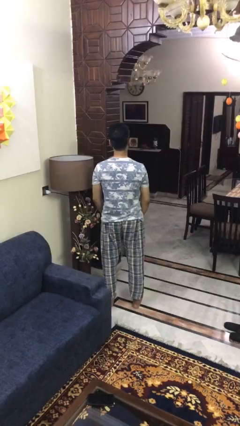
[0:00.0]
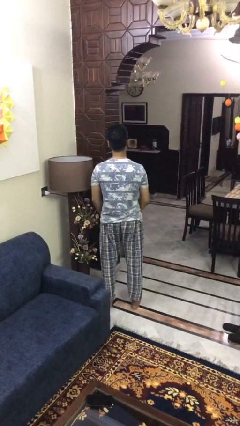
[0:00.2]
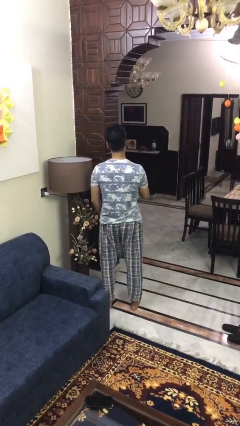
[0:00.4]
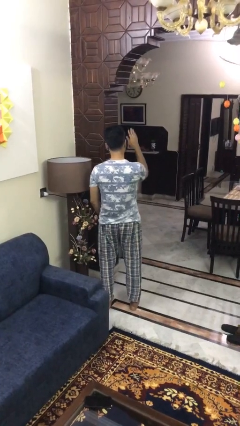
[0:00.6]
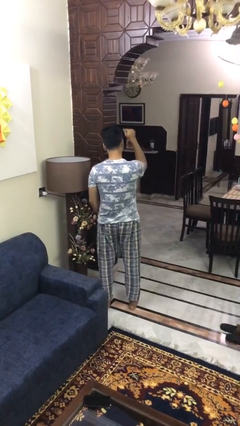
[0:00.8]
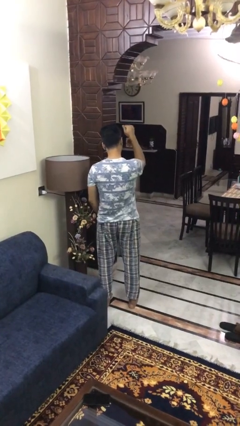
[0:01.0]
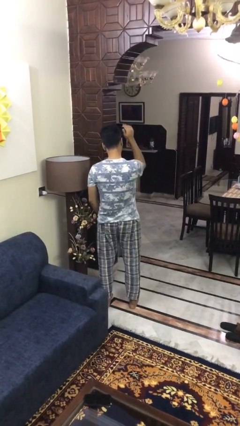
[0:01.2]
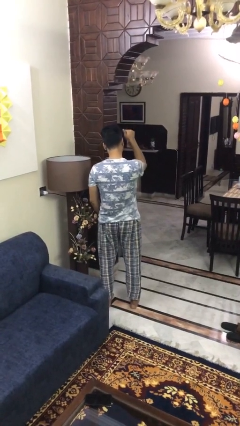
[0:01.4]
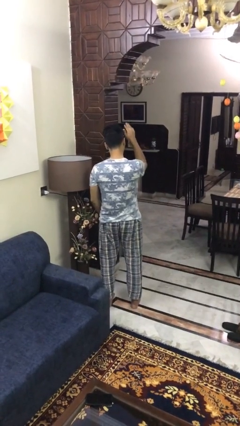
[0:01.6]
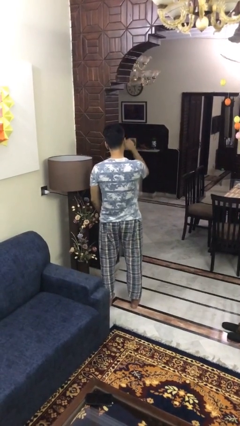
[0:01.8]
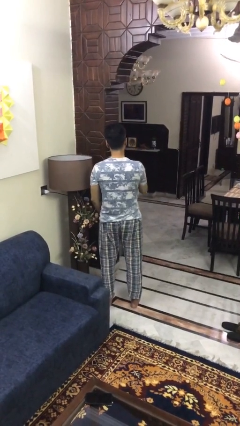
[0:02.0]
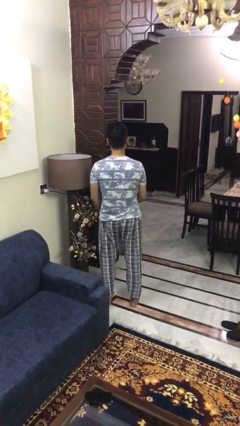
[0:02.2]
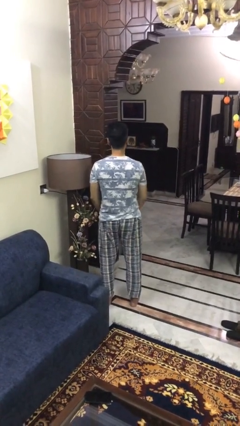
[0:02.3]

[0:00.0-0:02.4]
person gestures come here

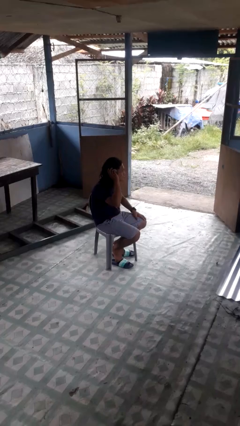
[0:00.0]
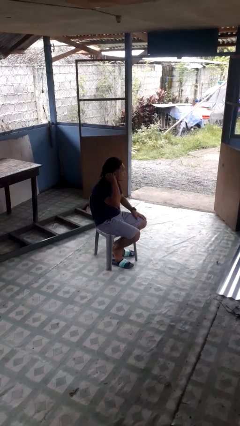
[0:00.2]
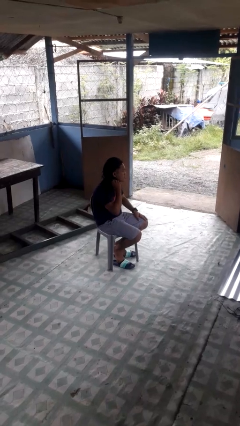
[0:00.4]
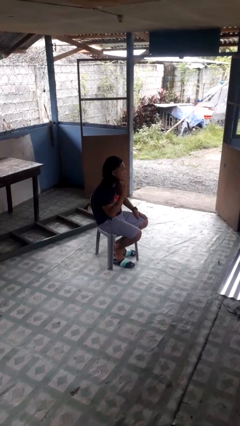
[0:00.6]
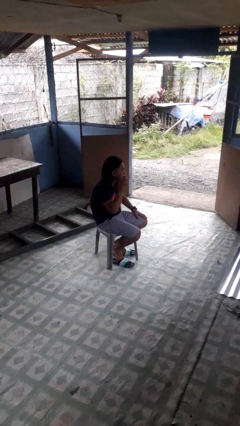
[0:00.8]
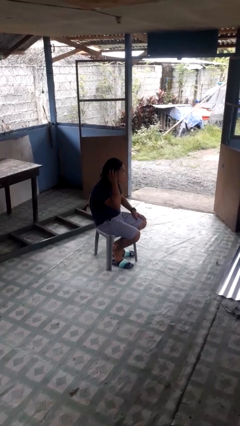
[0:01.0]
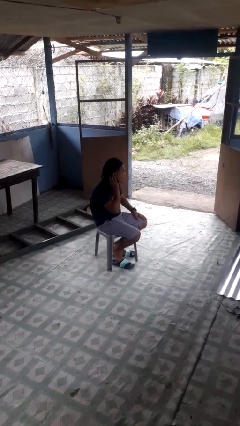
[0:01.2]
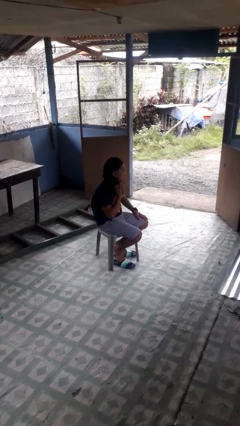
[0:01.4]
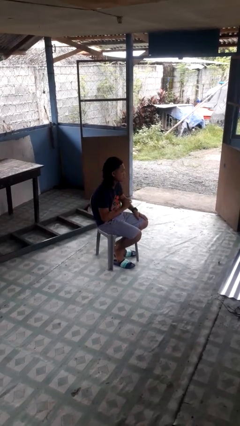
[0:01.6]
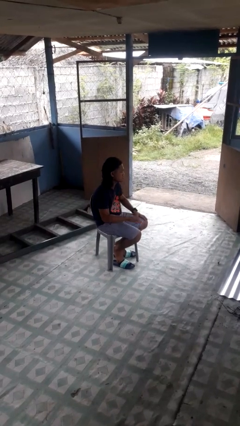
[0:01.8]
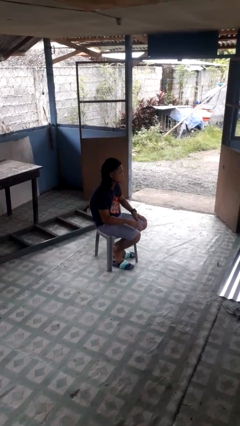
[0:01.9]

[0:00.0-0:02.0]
person strokes hair

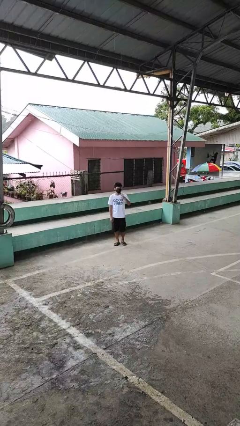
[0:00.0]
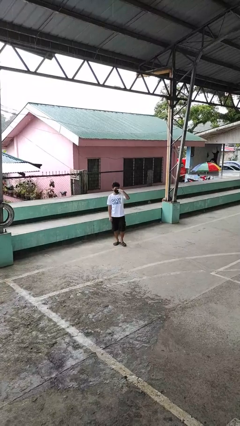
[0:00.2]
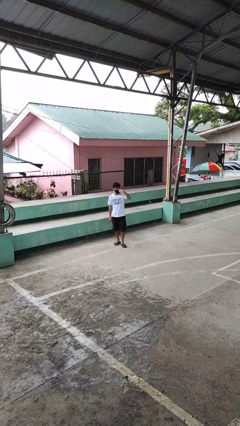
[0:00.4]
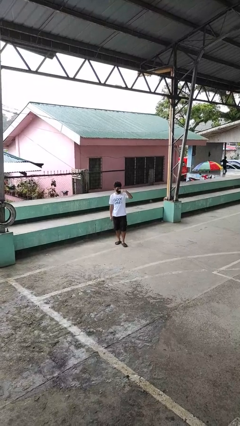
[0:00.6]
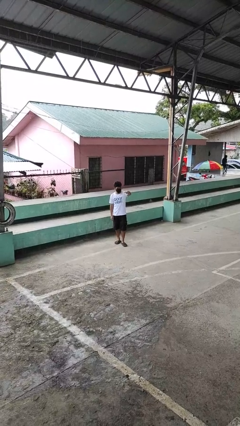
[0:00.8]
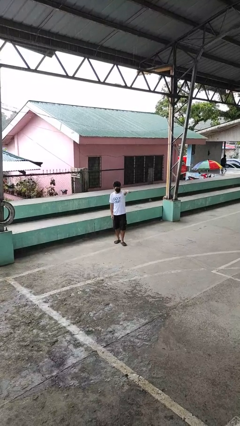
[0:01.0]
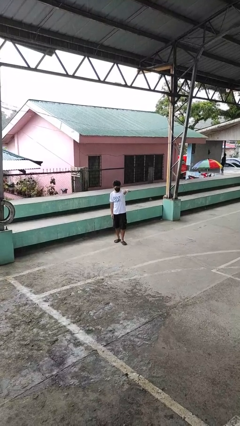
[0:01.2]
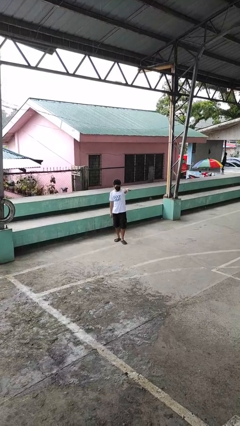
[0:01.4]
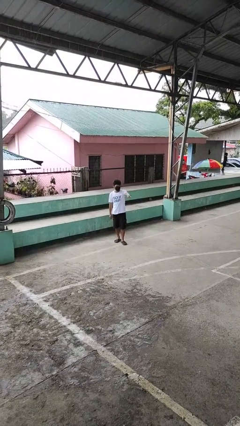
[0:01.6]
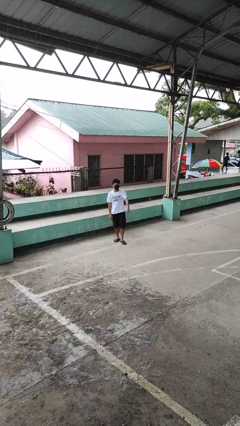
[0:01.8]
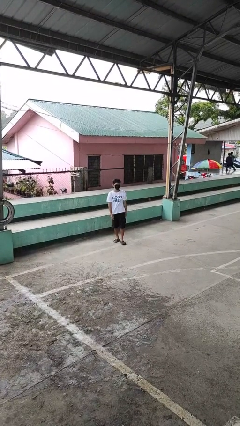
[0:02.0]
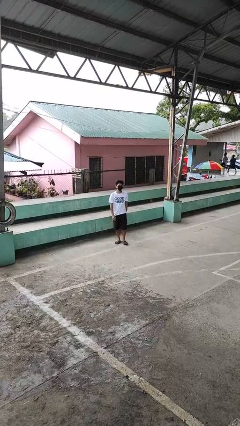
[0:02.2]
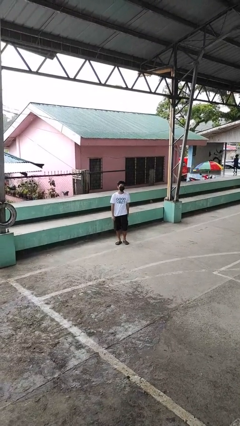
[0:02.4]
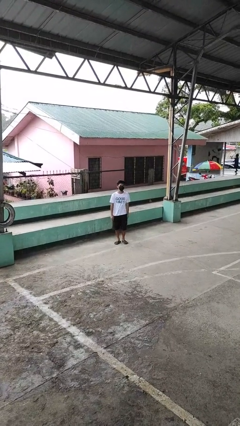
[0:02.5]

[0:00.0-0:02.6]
person gestures watch closely

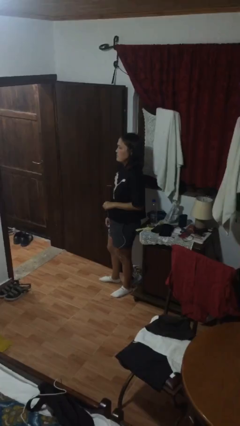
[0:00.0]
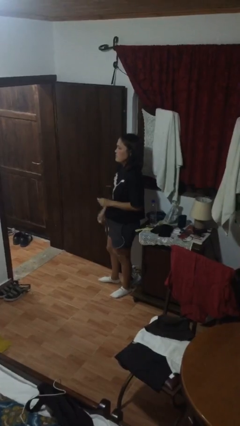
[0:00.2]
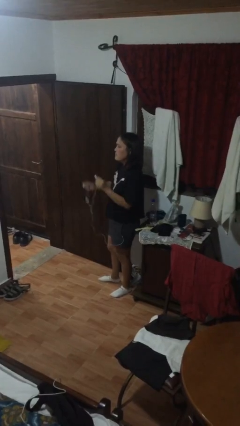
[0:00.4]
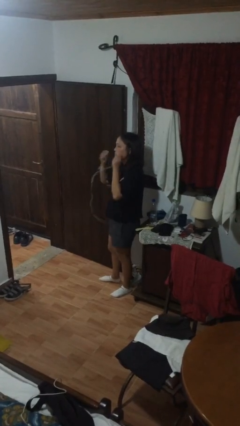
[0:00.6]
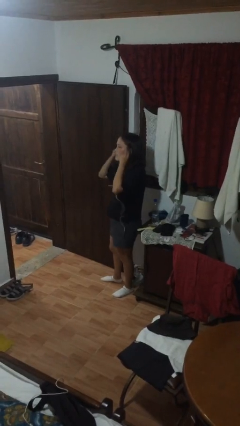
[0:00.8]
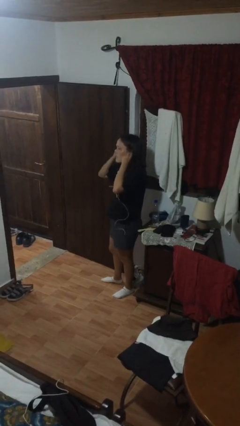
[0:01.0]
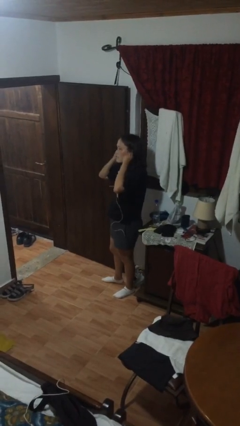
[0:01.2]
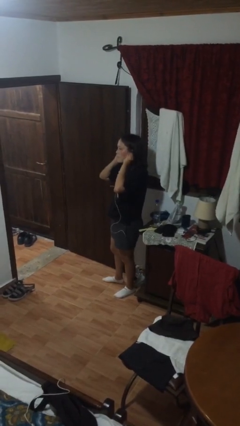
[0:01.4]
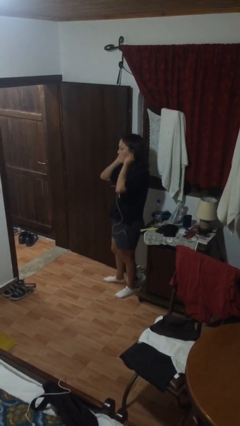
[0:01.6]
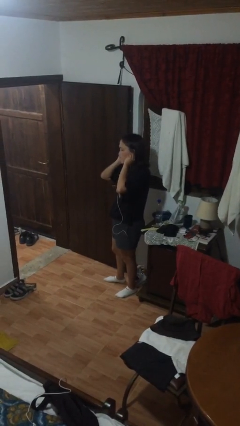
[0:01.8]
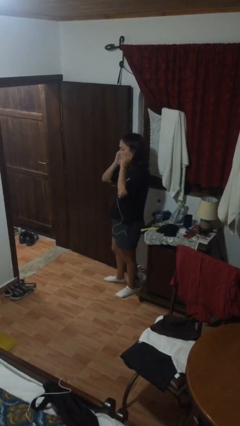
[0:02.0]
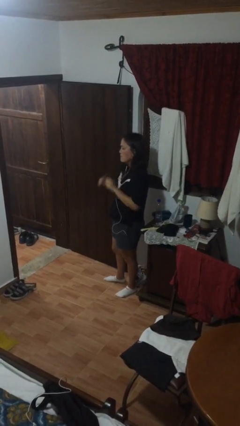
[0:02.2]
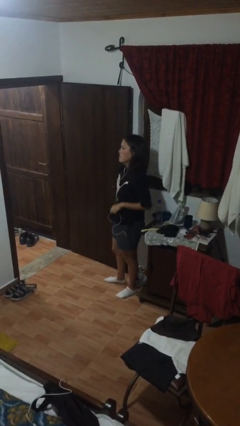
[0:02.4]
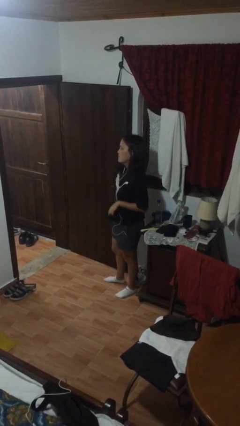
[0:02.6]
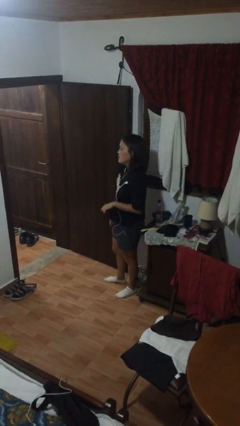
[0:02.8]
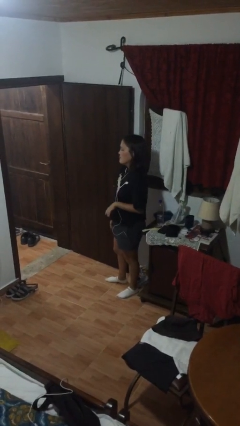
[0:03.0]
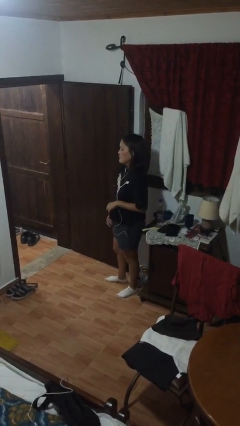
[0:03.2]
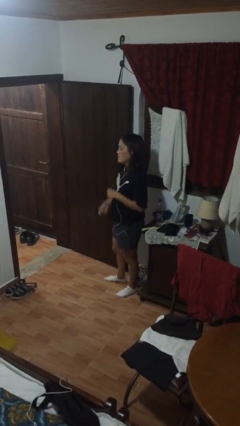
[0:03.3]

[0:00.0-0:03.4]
person puts on headphones

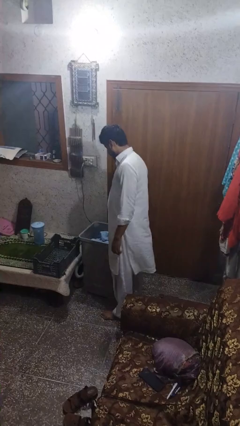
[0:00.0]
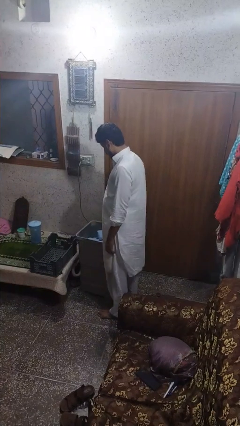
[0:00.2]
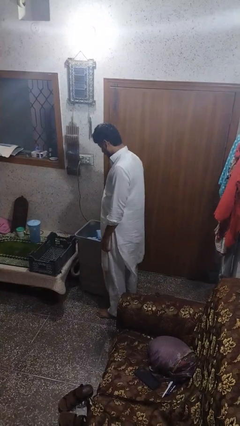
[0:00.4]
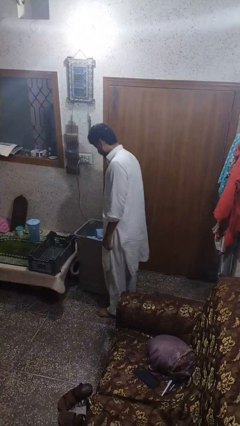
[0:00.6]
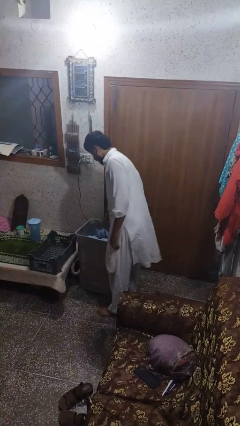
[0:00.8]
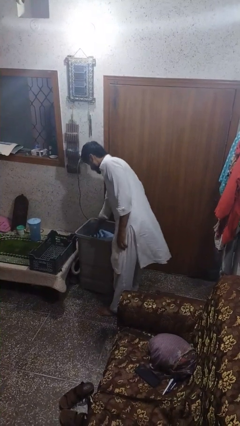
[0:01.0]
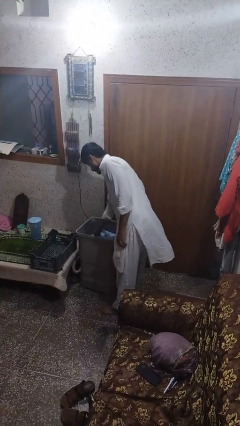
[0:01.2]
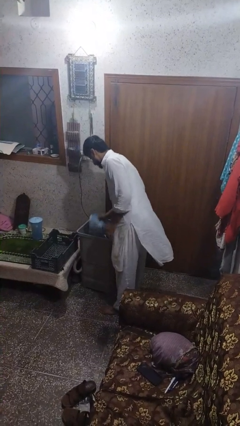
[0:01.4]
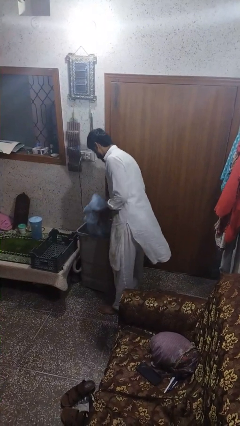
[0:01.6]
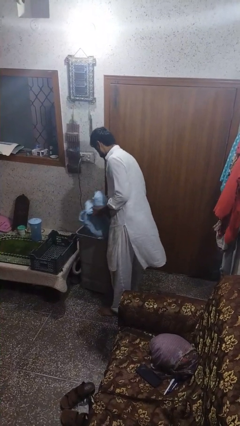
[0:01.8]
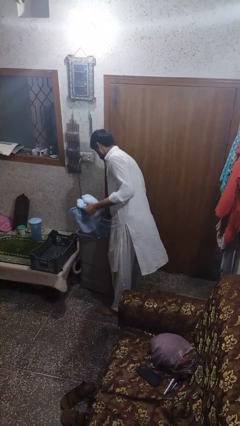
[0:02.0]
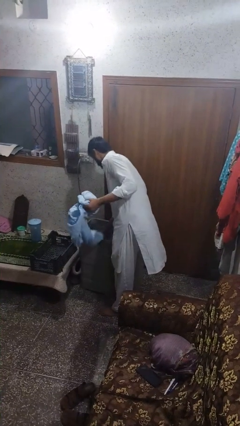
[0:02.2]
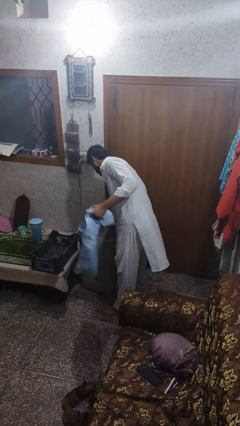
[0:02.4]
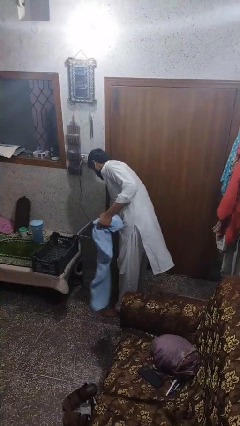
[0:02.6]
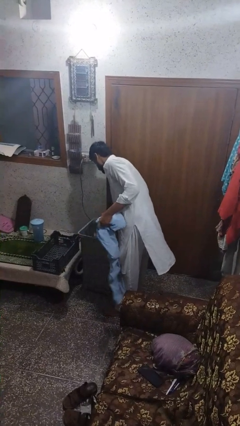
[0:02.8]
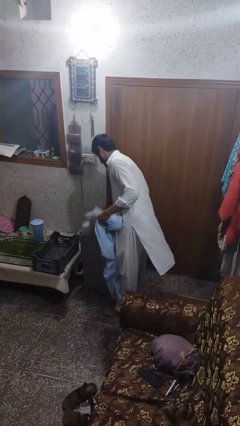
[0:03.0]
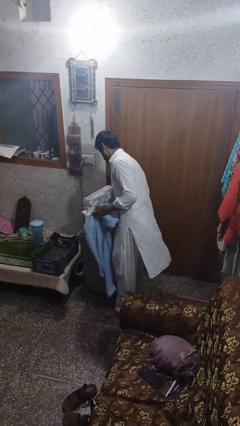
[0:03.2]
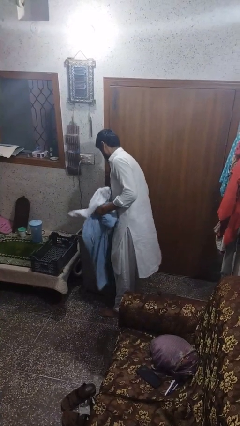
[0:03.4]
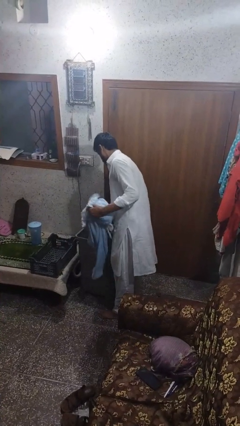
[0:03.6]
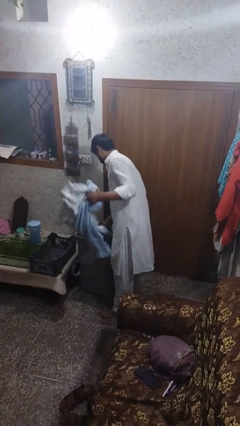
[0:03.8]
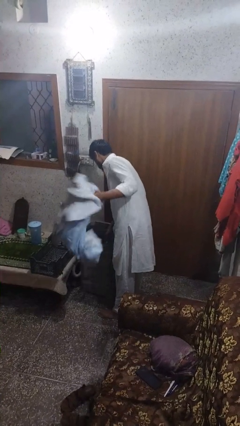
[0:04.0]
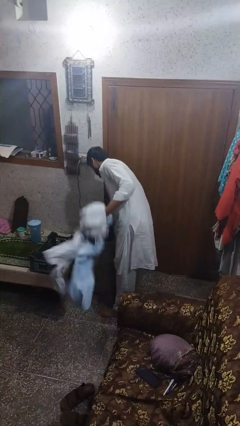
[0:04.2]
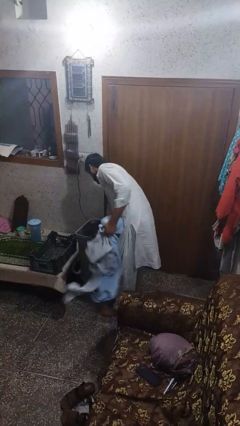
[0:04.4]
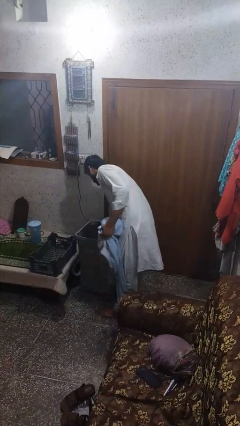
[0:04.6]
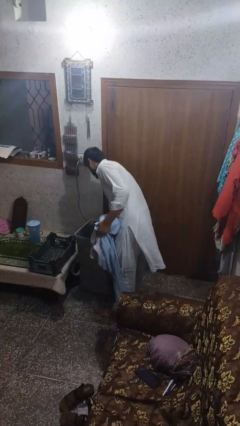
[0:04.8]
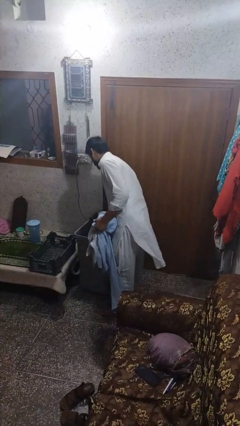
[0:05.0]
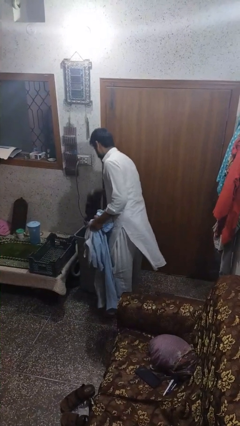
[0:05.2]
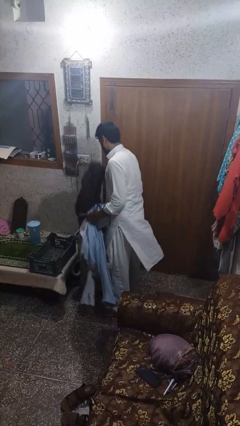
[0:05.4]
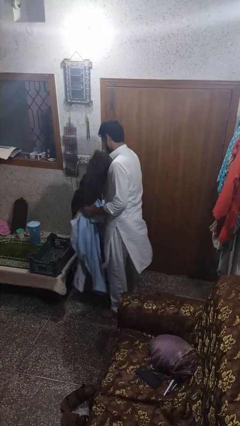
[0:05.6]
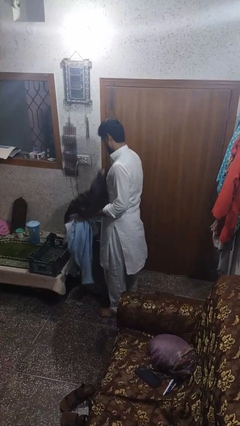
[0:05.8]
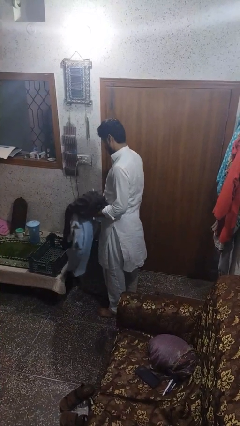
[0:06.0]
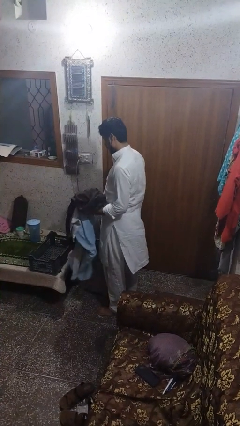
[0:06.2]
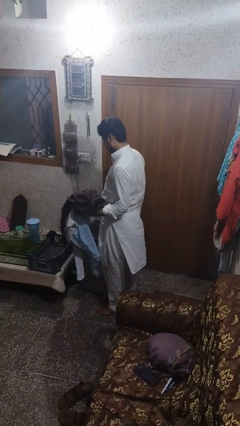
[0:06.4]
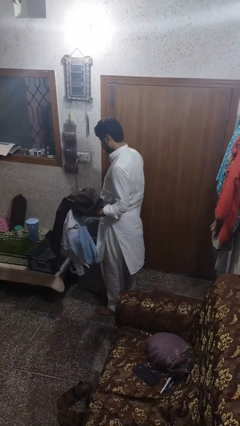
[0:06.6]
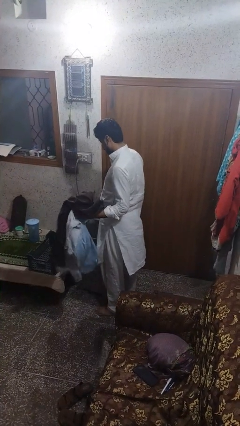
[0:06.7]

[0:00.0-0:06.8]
person unloads dryer

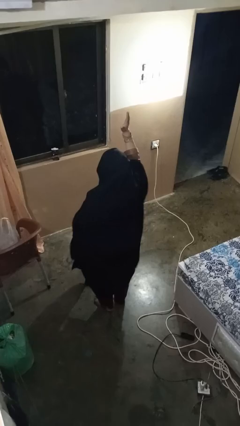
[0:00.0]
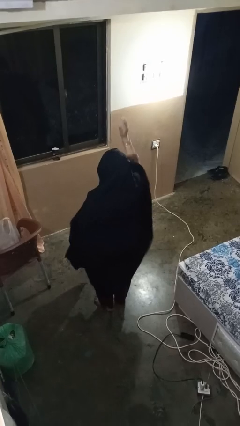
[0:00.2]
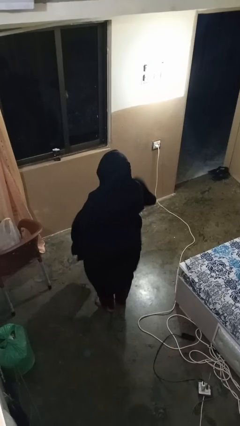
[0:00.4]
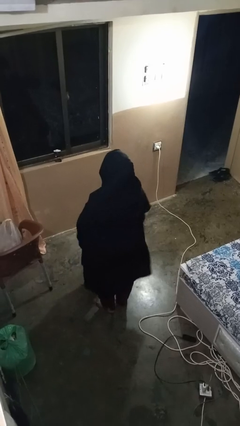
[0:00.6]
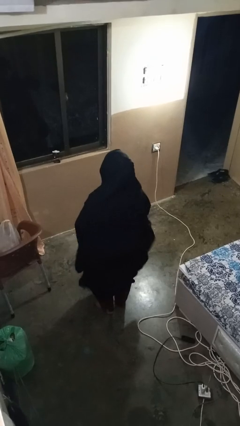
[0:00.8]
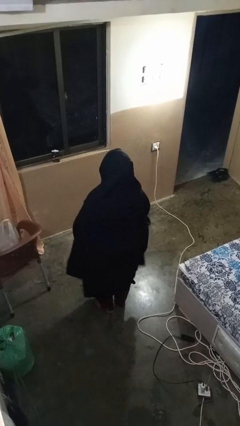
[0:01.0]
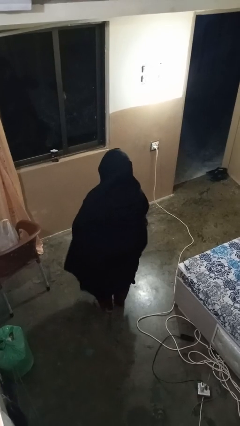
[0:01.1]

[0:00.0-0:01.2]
person gestures lower hand
